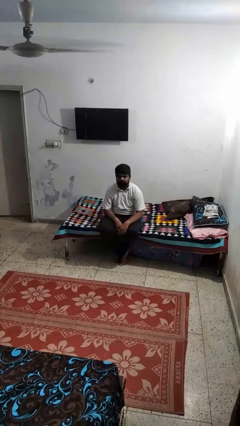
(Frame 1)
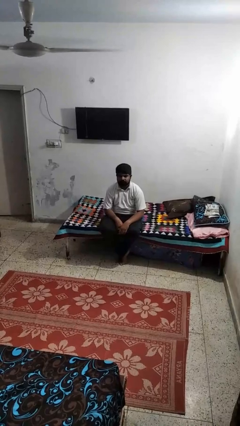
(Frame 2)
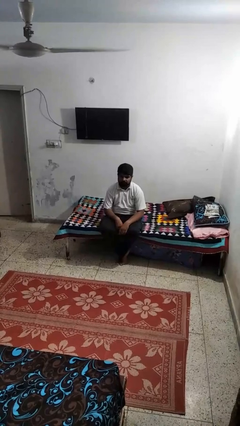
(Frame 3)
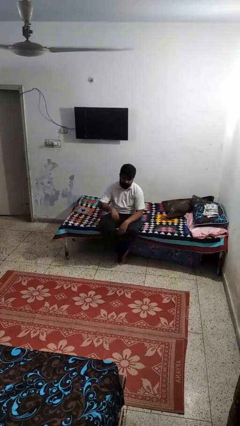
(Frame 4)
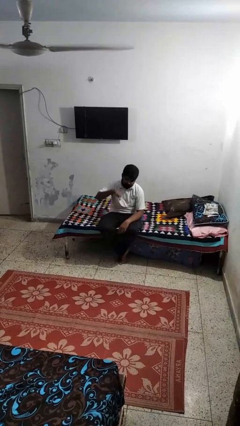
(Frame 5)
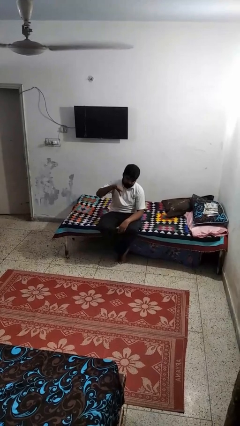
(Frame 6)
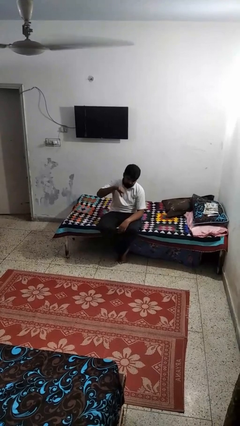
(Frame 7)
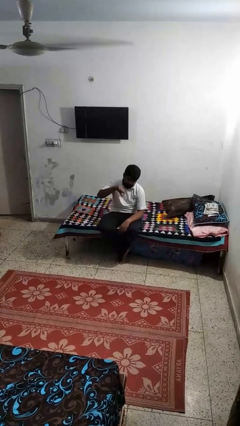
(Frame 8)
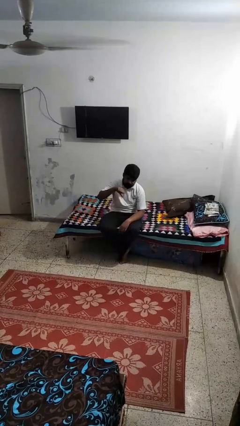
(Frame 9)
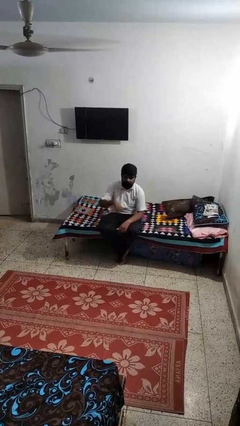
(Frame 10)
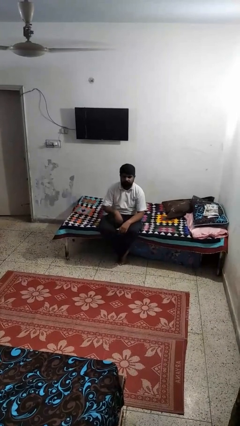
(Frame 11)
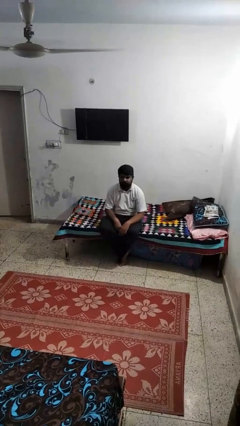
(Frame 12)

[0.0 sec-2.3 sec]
person gestures thumbs down

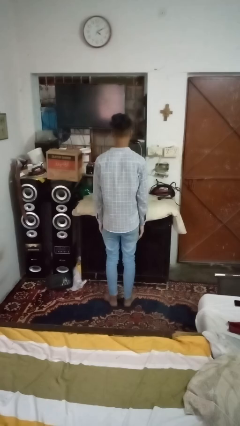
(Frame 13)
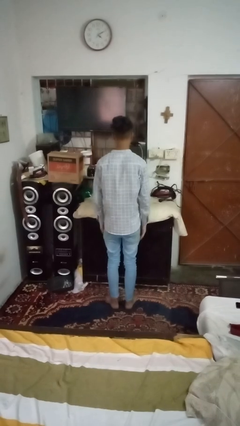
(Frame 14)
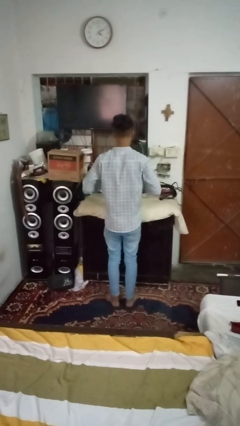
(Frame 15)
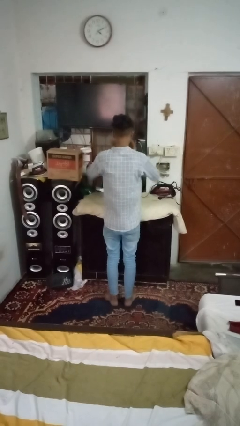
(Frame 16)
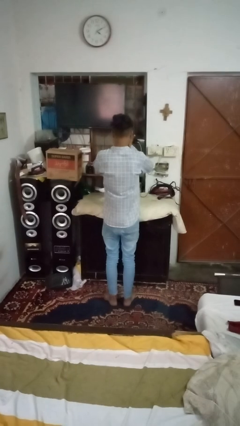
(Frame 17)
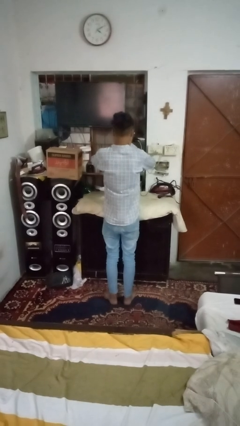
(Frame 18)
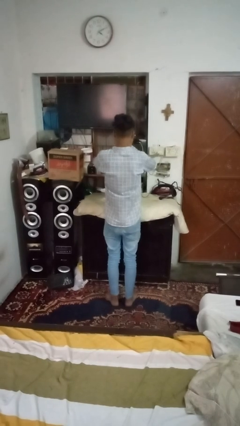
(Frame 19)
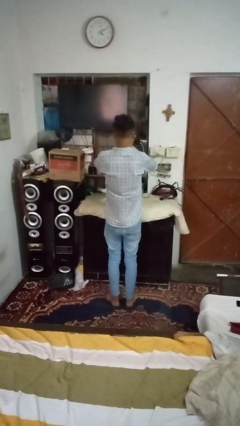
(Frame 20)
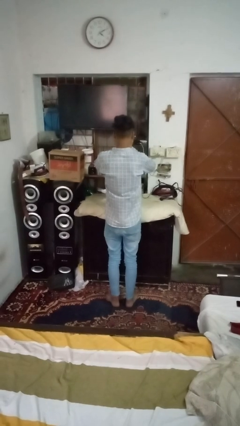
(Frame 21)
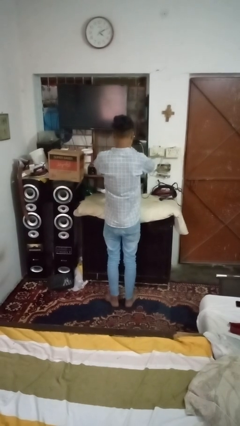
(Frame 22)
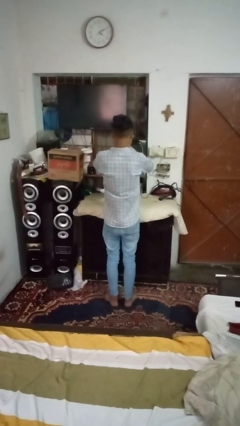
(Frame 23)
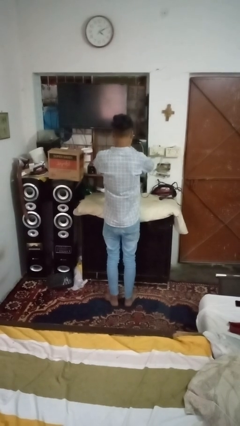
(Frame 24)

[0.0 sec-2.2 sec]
person covers face with hands

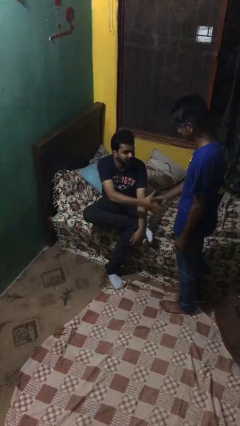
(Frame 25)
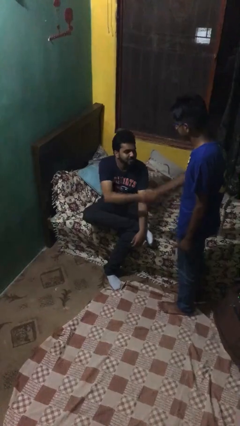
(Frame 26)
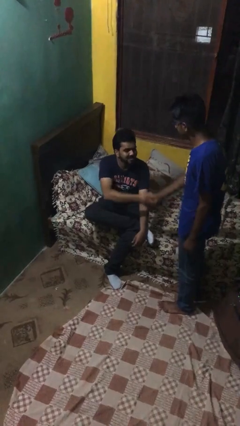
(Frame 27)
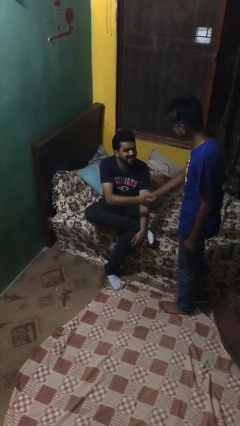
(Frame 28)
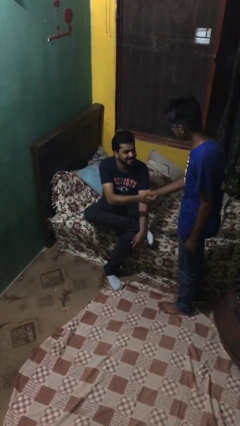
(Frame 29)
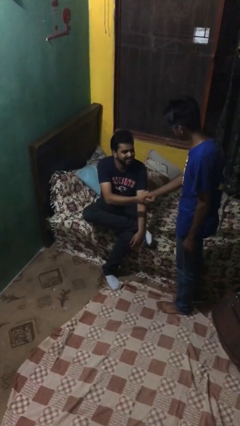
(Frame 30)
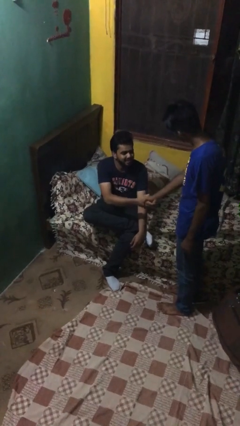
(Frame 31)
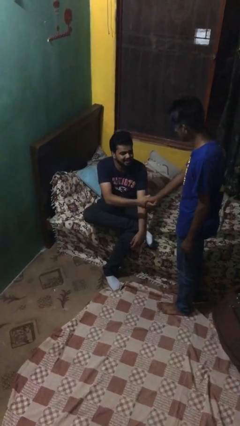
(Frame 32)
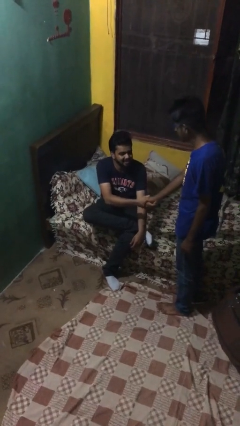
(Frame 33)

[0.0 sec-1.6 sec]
person shakes hand

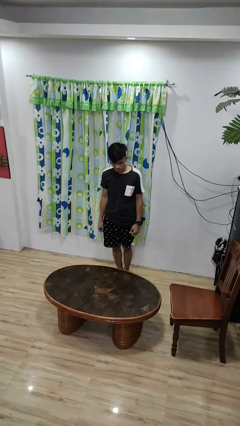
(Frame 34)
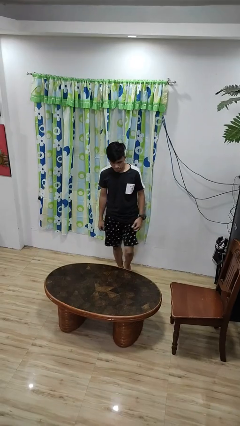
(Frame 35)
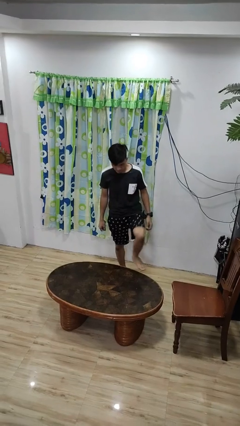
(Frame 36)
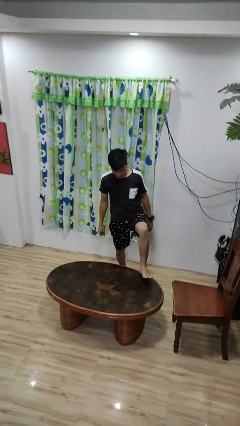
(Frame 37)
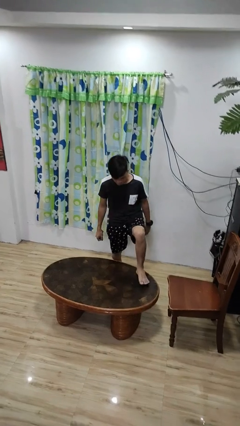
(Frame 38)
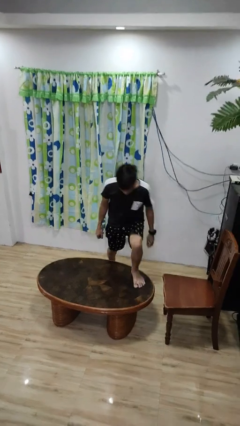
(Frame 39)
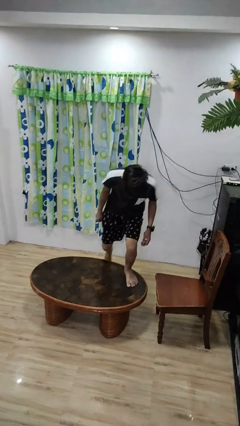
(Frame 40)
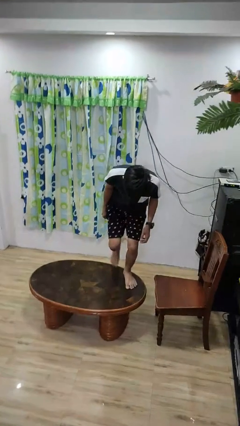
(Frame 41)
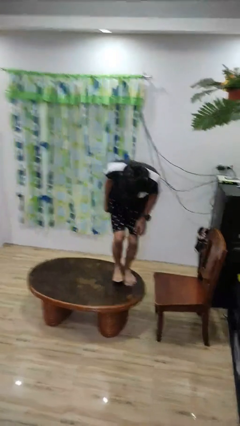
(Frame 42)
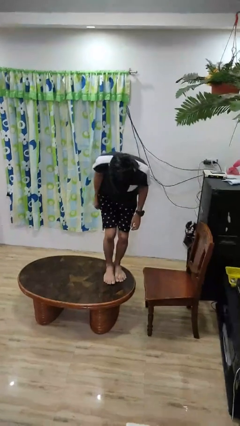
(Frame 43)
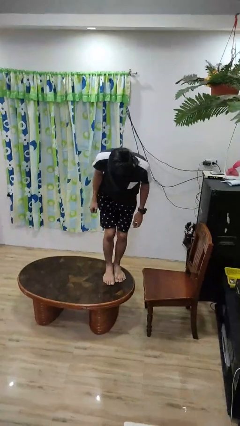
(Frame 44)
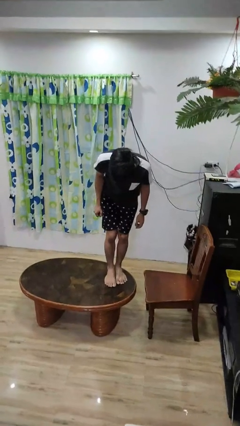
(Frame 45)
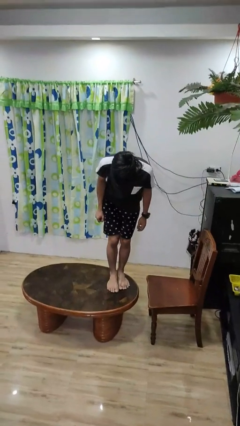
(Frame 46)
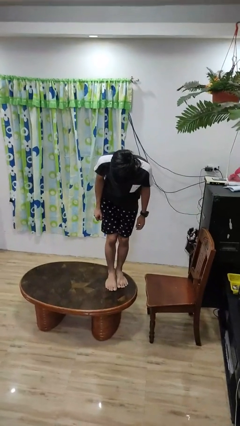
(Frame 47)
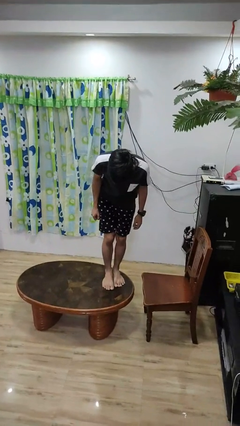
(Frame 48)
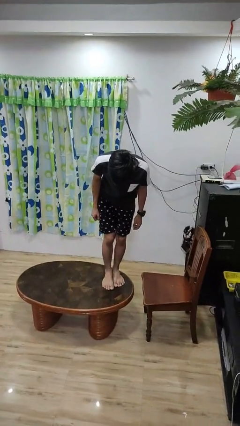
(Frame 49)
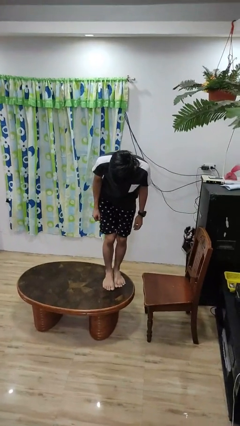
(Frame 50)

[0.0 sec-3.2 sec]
person climbs on table

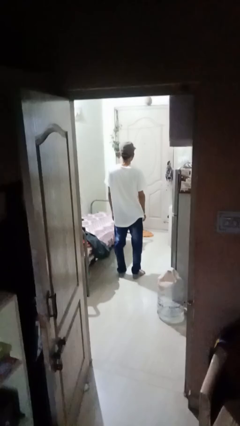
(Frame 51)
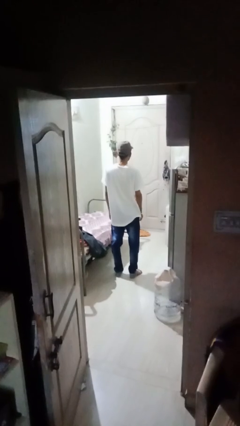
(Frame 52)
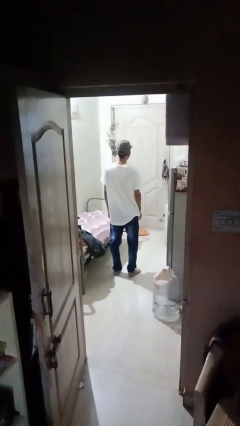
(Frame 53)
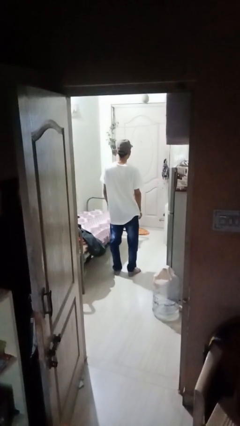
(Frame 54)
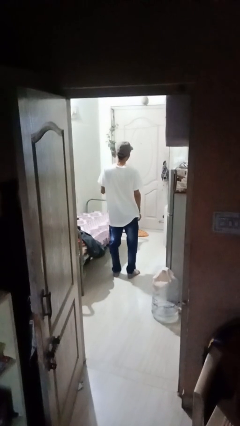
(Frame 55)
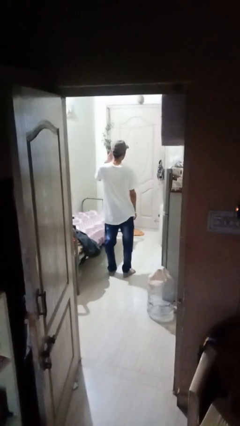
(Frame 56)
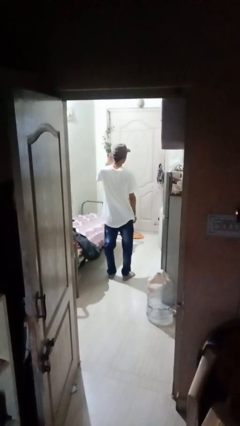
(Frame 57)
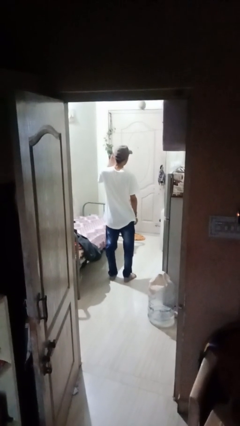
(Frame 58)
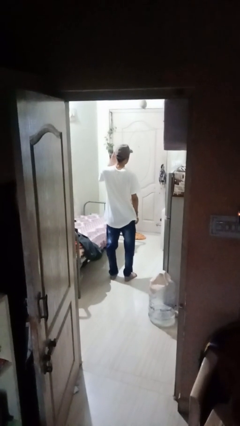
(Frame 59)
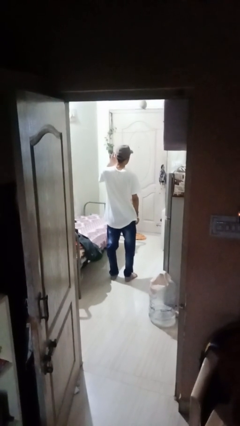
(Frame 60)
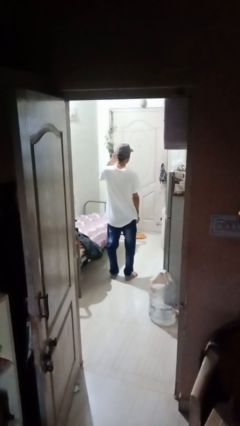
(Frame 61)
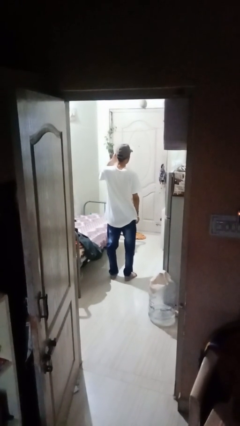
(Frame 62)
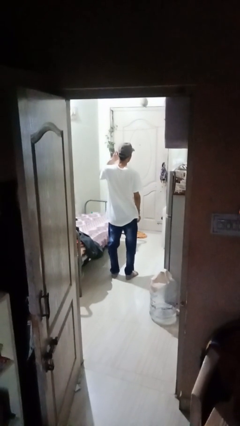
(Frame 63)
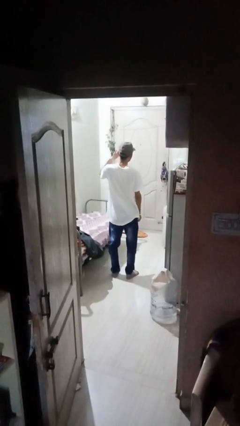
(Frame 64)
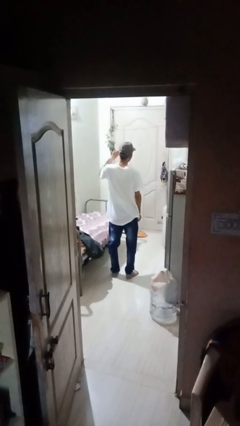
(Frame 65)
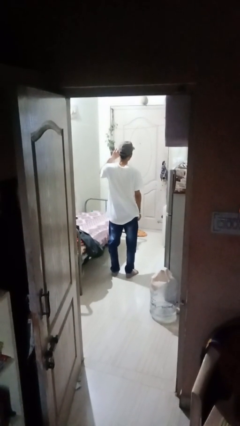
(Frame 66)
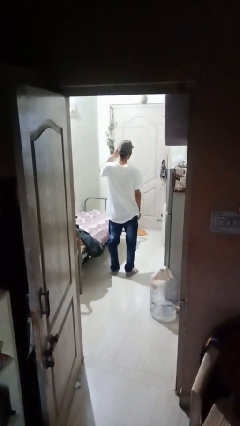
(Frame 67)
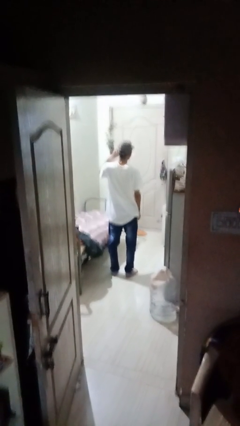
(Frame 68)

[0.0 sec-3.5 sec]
person rubs eyes

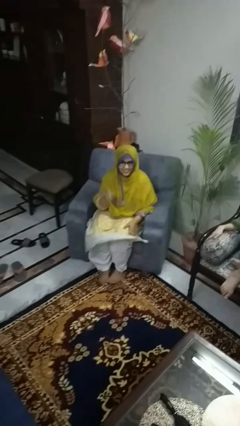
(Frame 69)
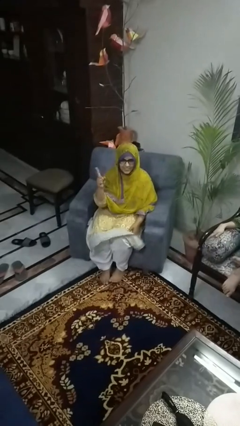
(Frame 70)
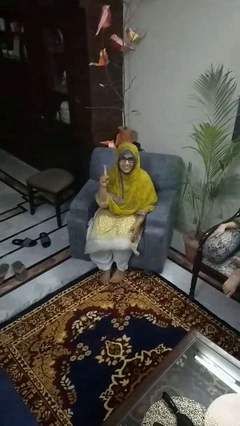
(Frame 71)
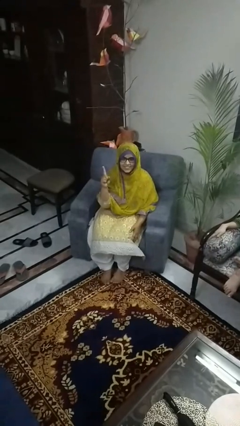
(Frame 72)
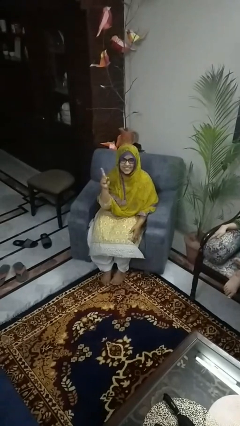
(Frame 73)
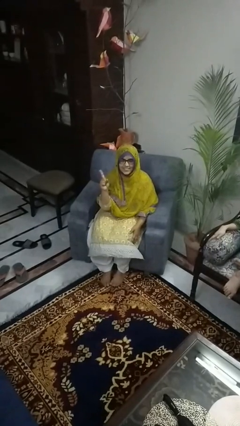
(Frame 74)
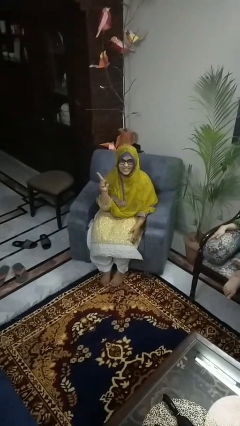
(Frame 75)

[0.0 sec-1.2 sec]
person gestures number one

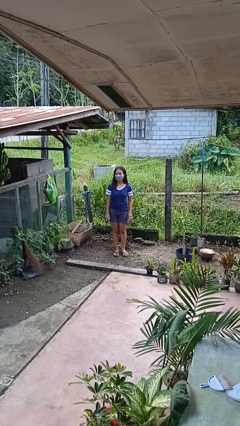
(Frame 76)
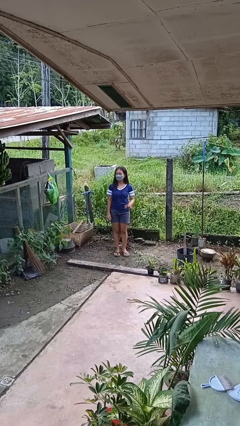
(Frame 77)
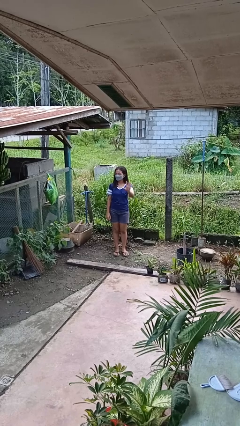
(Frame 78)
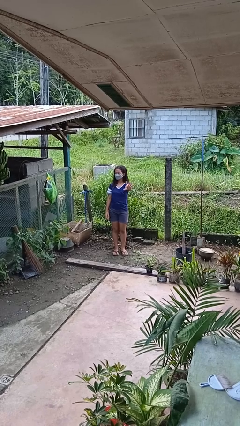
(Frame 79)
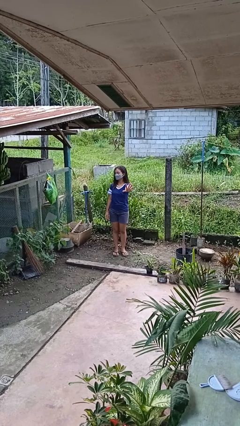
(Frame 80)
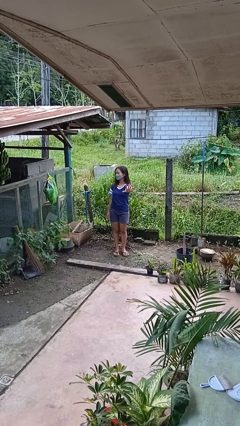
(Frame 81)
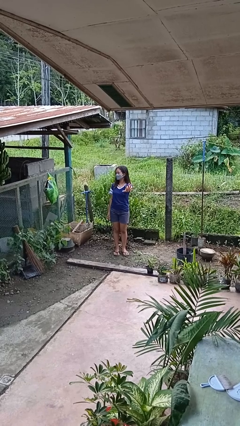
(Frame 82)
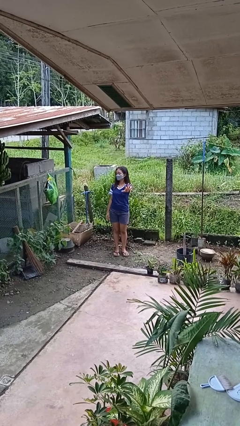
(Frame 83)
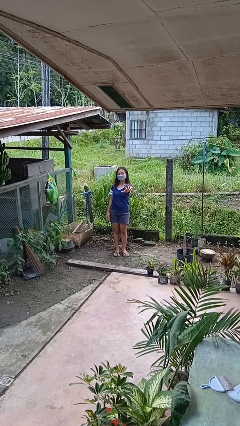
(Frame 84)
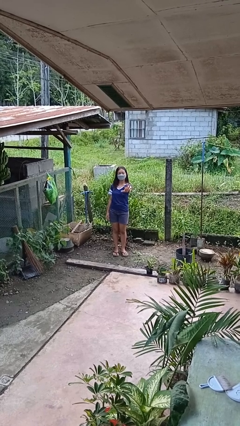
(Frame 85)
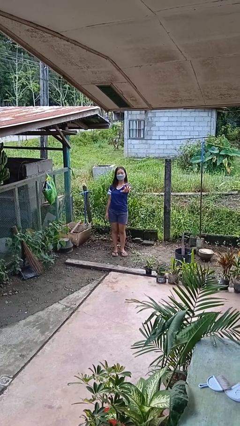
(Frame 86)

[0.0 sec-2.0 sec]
person gestures number five

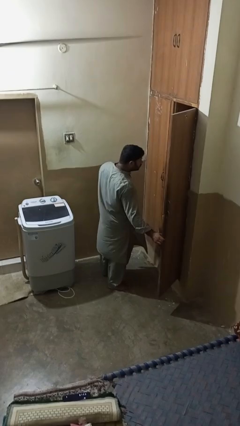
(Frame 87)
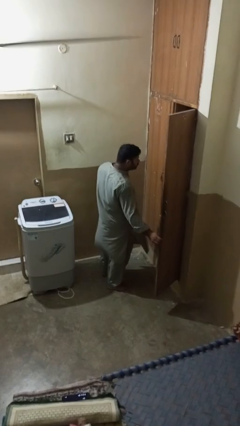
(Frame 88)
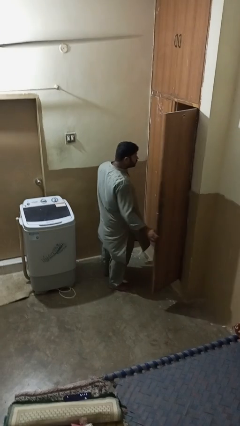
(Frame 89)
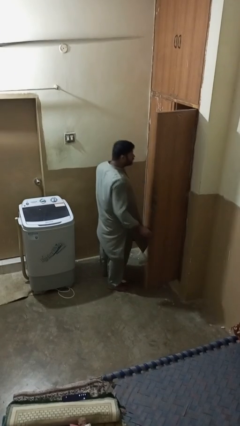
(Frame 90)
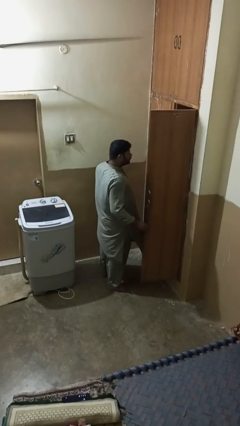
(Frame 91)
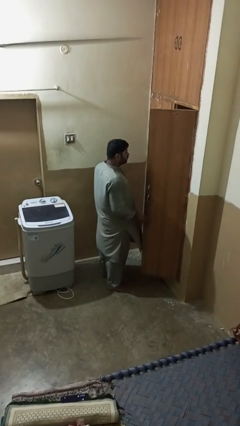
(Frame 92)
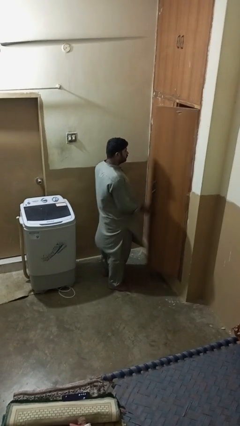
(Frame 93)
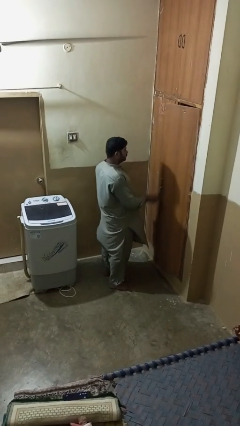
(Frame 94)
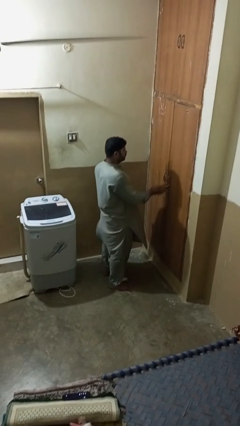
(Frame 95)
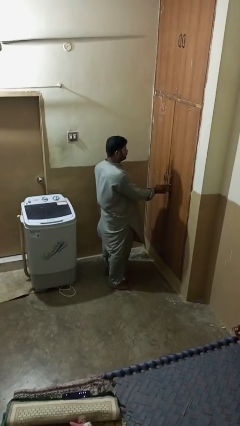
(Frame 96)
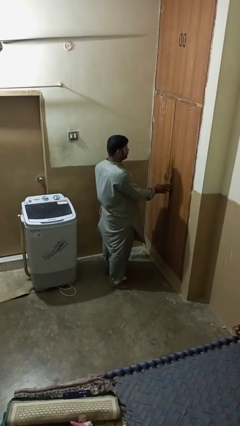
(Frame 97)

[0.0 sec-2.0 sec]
person closes closet door
